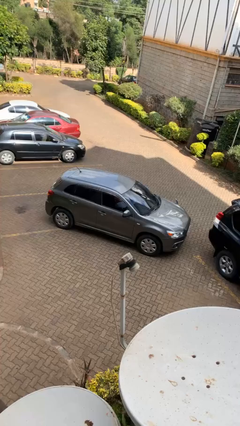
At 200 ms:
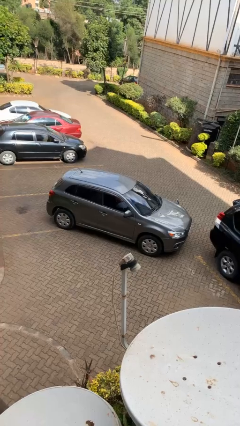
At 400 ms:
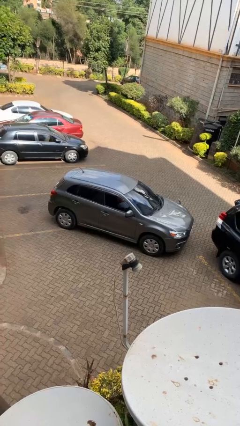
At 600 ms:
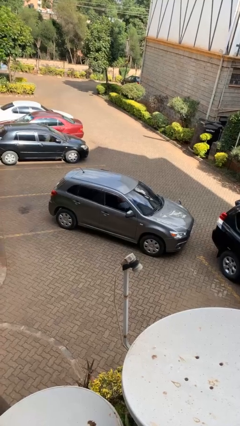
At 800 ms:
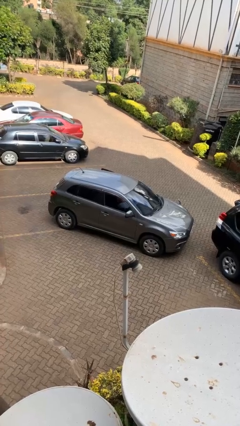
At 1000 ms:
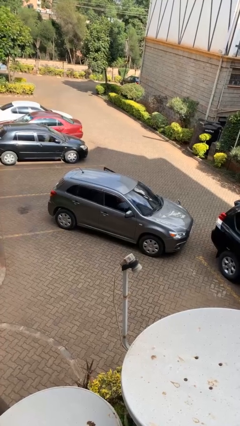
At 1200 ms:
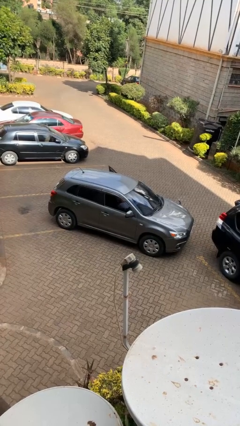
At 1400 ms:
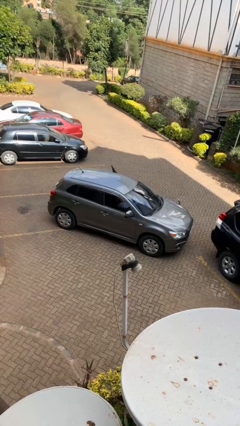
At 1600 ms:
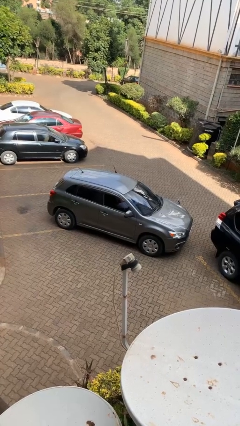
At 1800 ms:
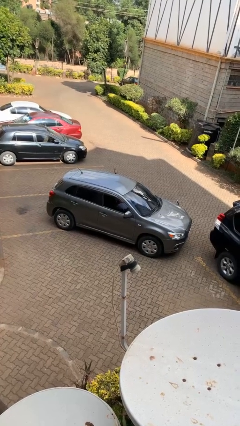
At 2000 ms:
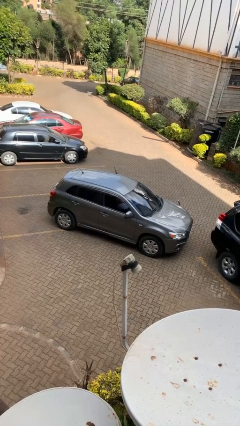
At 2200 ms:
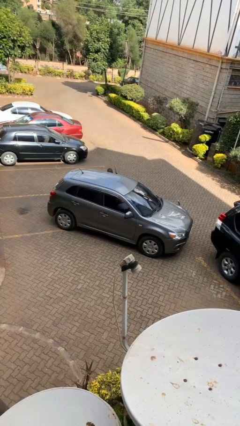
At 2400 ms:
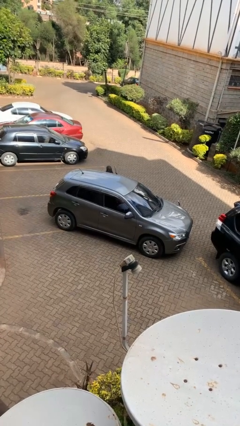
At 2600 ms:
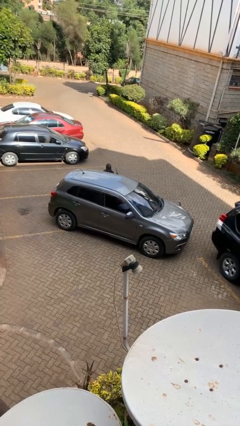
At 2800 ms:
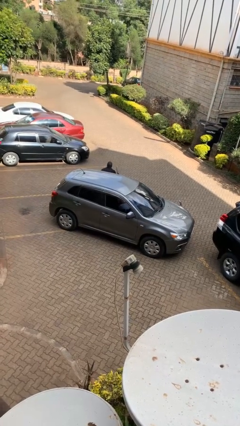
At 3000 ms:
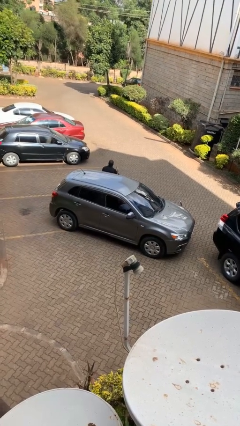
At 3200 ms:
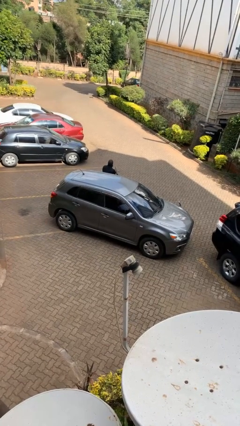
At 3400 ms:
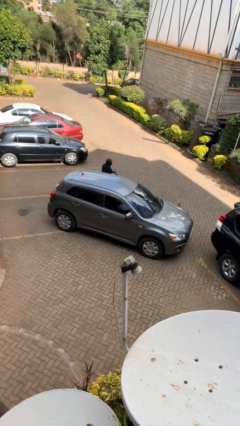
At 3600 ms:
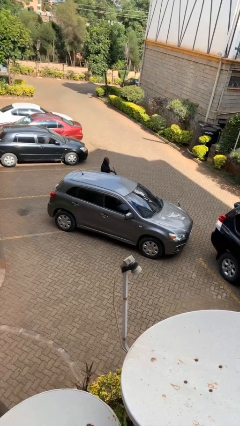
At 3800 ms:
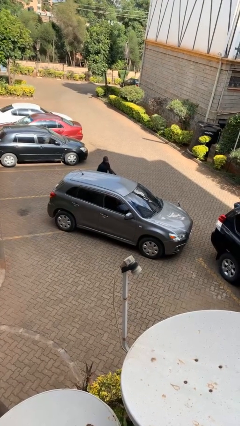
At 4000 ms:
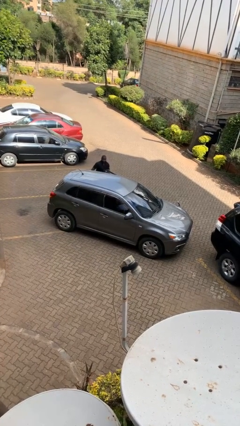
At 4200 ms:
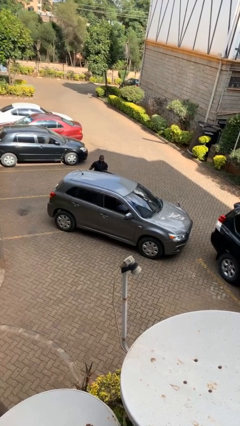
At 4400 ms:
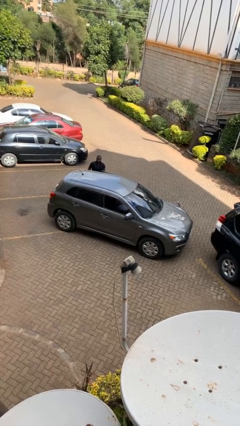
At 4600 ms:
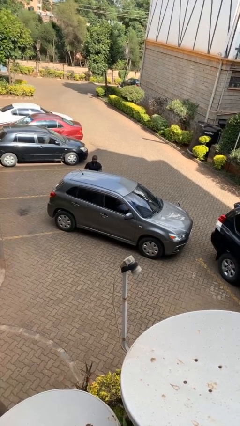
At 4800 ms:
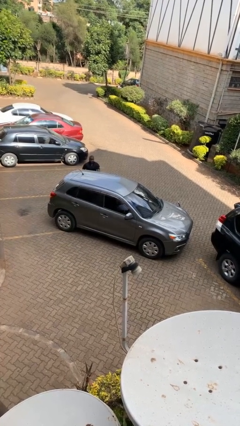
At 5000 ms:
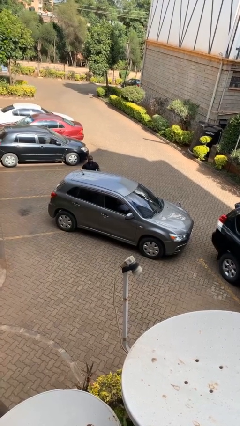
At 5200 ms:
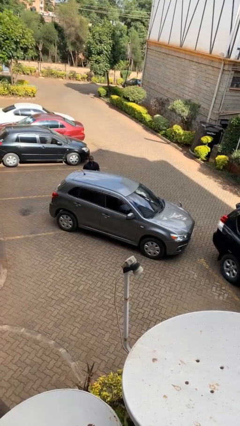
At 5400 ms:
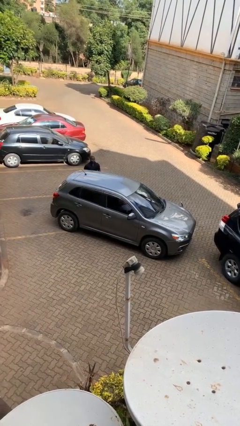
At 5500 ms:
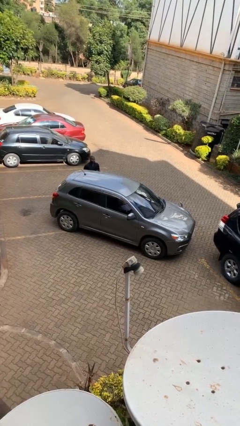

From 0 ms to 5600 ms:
car drops off person

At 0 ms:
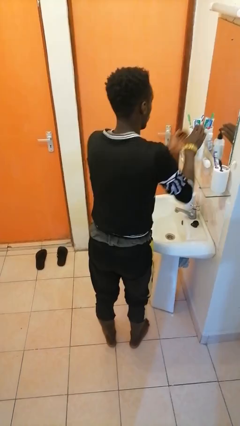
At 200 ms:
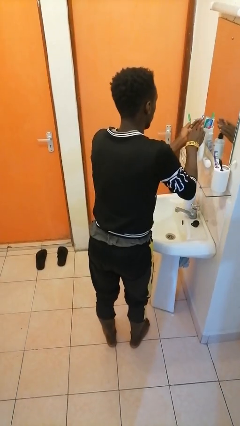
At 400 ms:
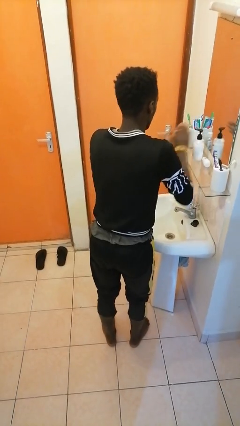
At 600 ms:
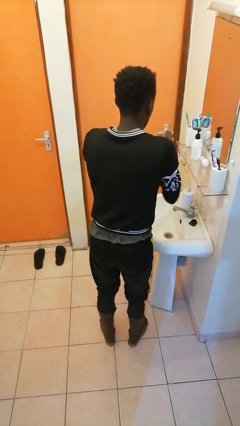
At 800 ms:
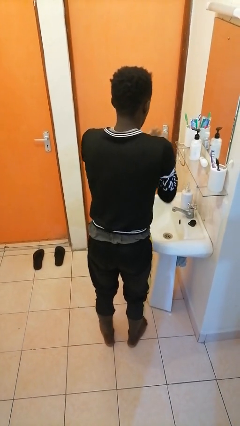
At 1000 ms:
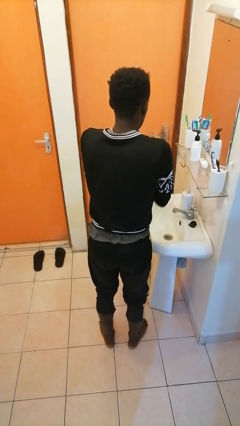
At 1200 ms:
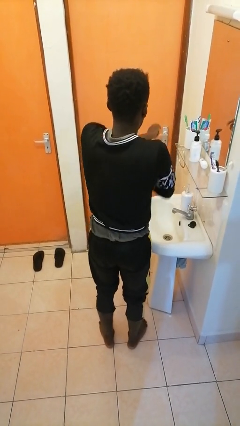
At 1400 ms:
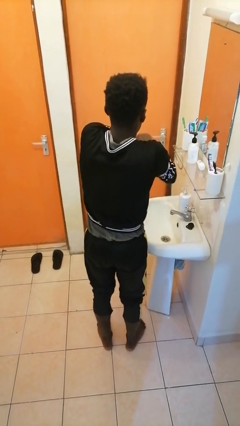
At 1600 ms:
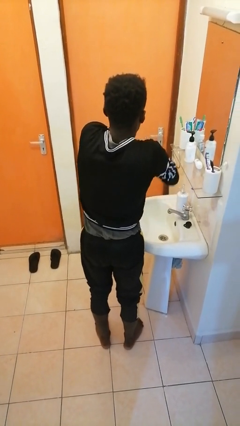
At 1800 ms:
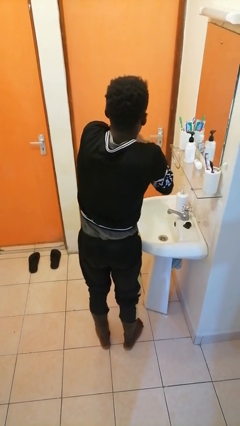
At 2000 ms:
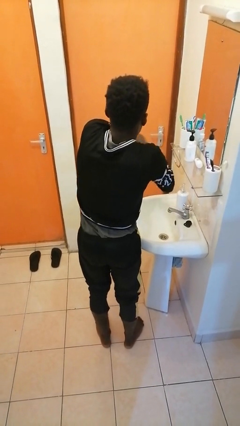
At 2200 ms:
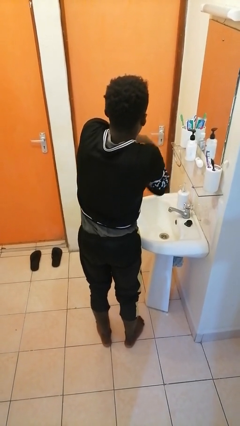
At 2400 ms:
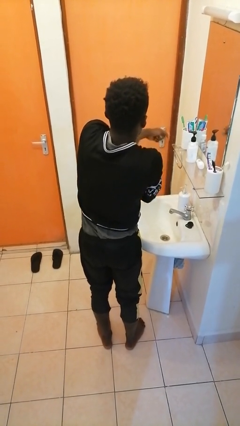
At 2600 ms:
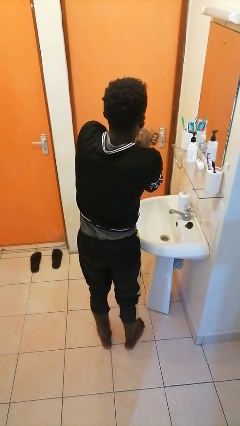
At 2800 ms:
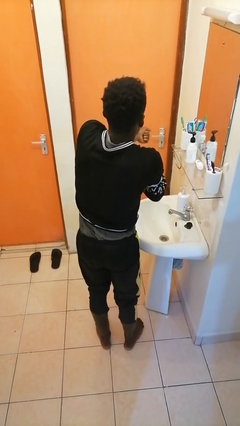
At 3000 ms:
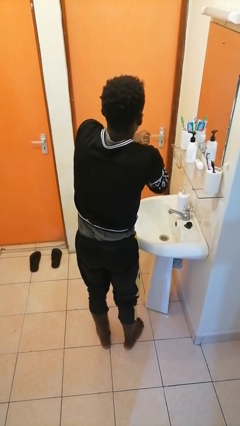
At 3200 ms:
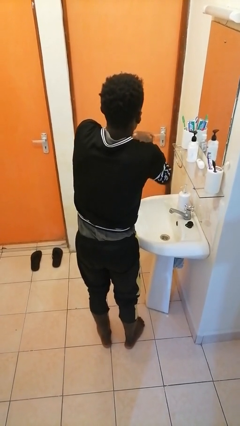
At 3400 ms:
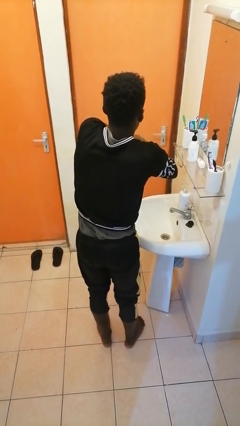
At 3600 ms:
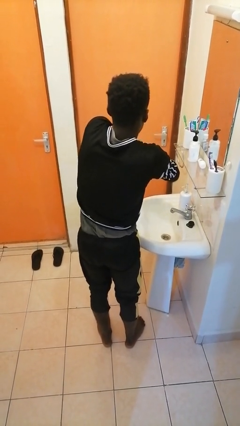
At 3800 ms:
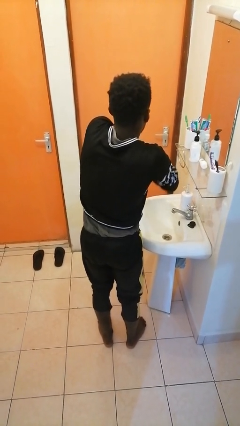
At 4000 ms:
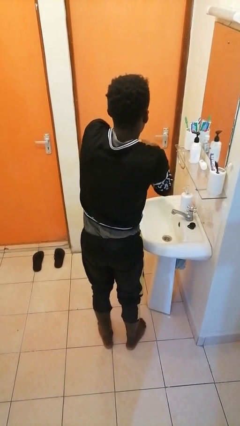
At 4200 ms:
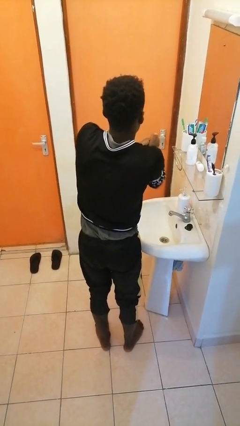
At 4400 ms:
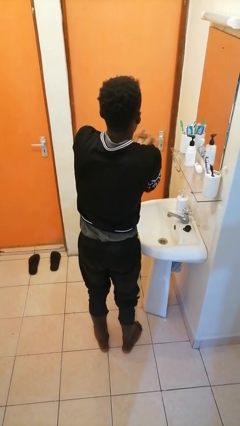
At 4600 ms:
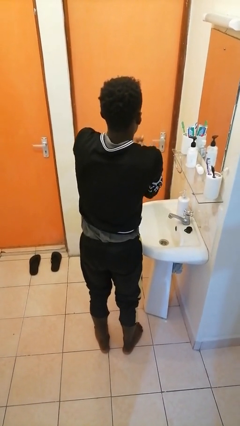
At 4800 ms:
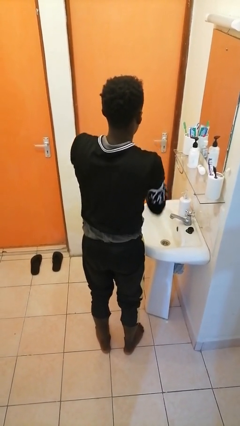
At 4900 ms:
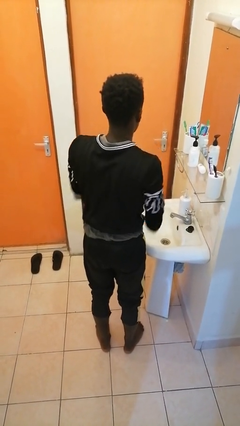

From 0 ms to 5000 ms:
person applies facial moisturizer

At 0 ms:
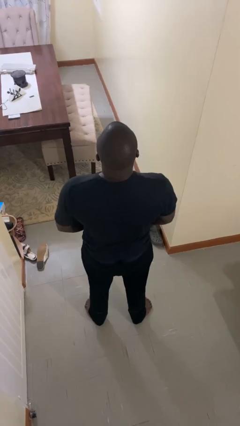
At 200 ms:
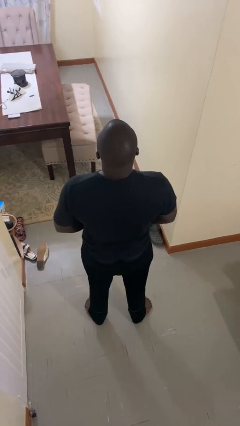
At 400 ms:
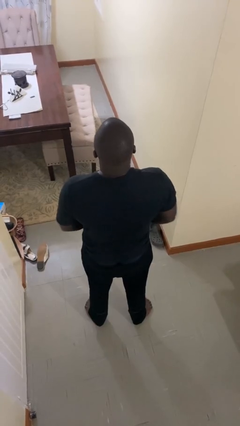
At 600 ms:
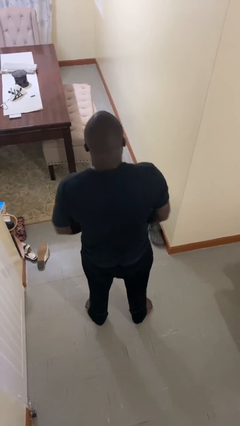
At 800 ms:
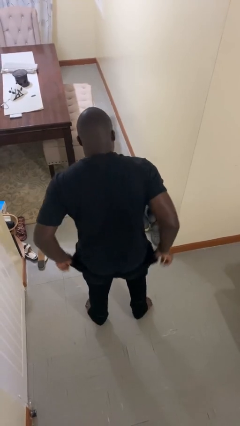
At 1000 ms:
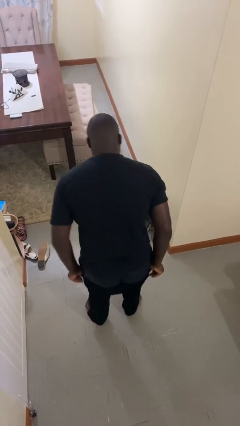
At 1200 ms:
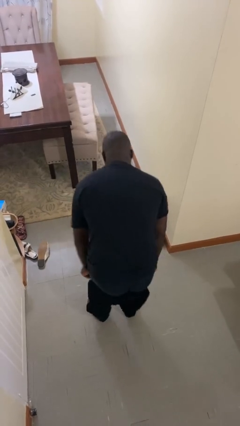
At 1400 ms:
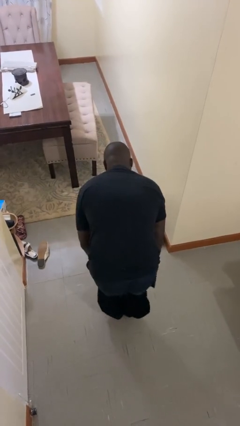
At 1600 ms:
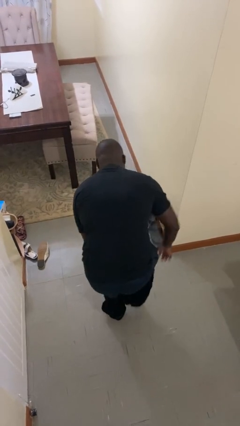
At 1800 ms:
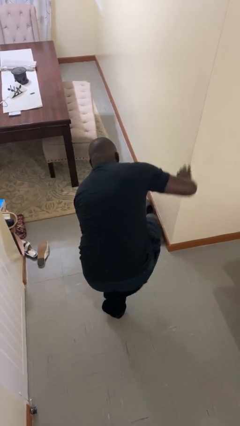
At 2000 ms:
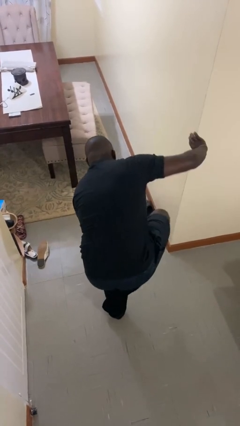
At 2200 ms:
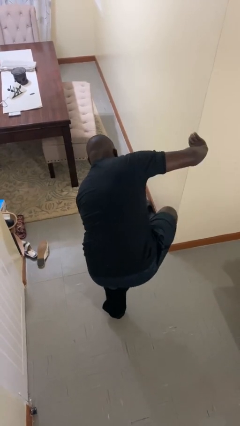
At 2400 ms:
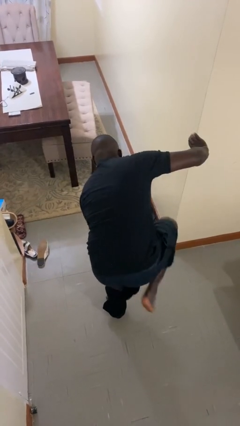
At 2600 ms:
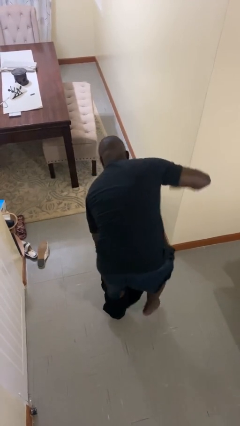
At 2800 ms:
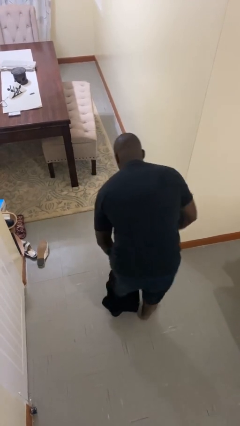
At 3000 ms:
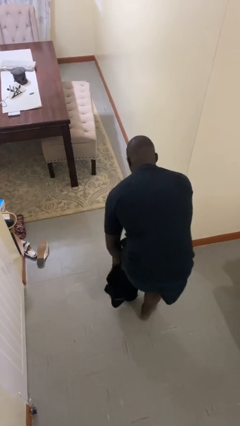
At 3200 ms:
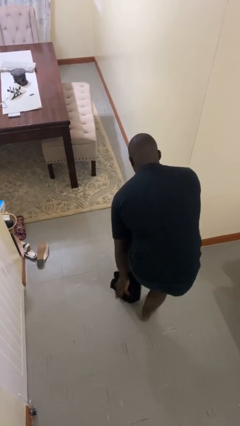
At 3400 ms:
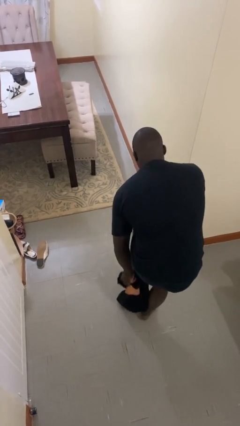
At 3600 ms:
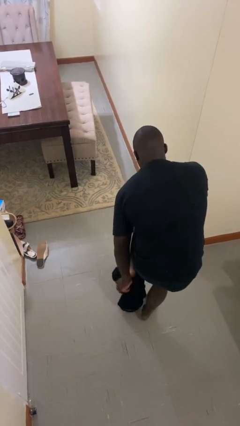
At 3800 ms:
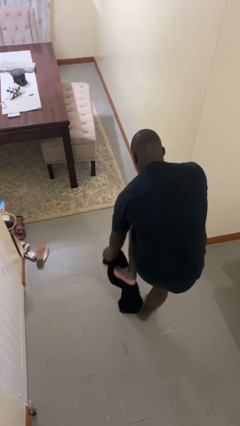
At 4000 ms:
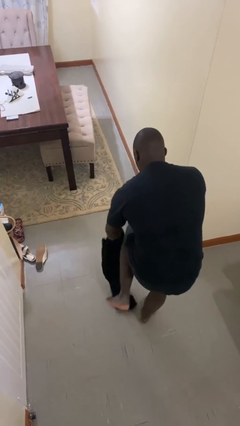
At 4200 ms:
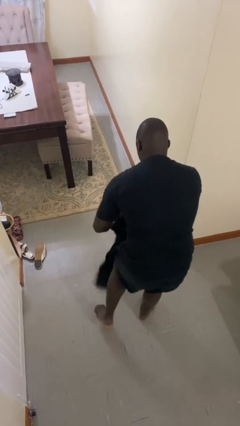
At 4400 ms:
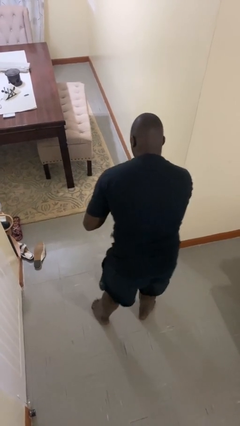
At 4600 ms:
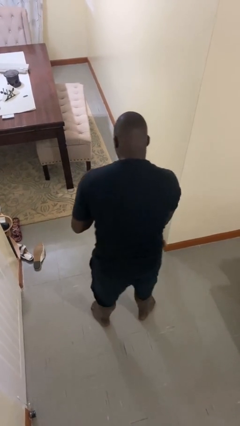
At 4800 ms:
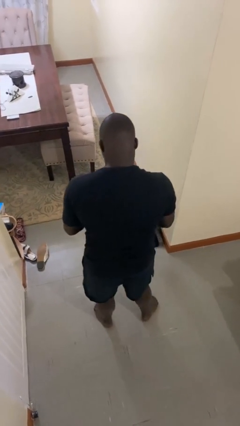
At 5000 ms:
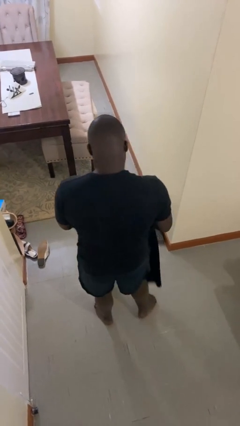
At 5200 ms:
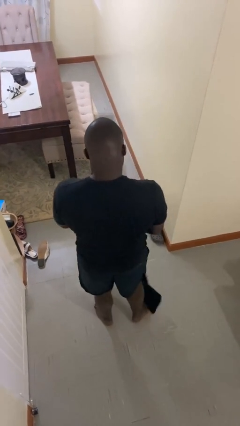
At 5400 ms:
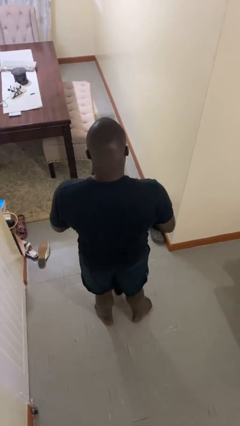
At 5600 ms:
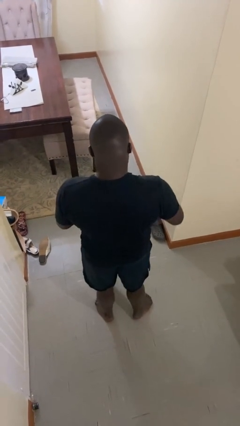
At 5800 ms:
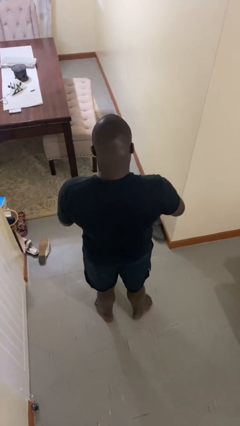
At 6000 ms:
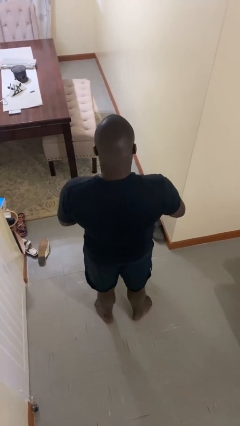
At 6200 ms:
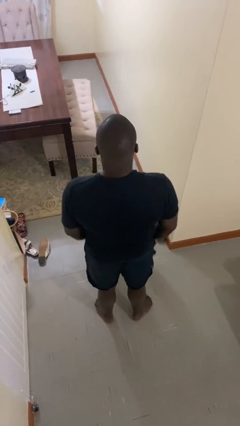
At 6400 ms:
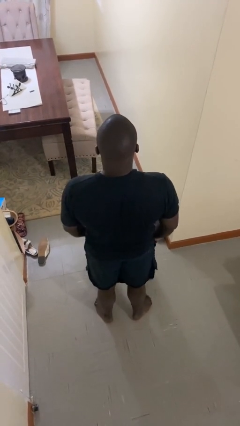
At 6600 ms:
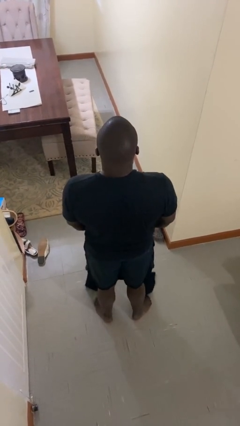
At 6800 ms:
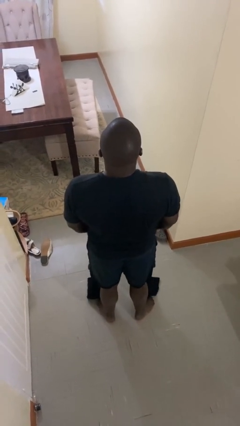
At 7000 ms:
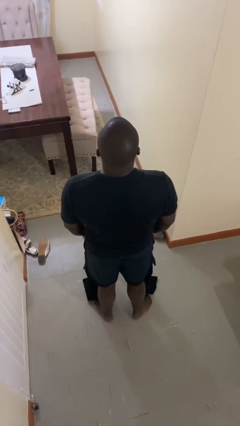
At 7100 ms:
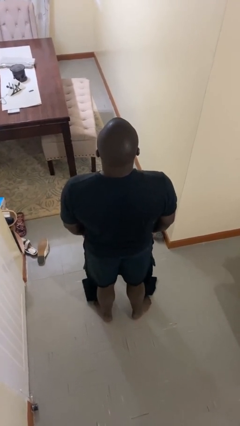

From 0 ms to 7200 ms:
person puts on pants

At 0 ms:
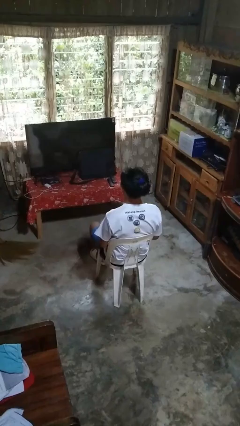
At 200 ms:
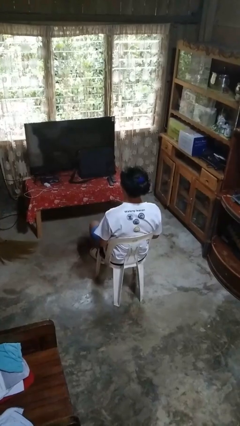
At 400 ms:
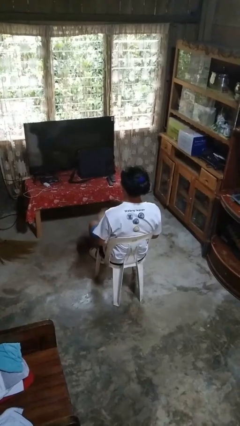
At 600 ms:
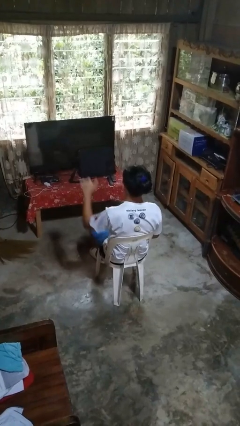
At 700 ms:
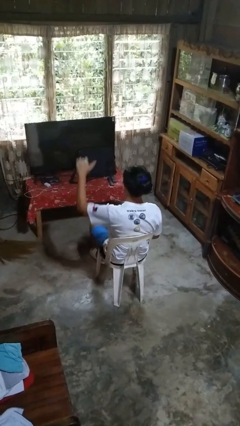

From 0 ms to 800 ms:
person gestures thumbs down
